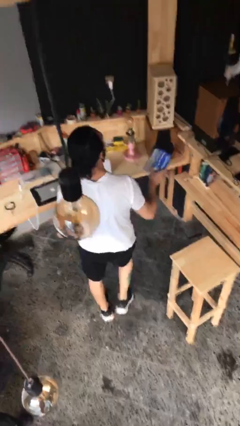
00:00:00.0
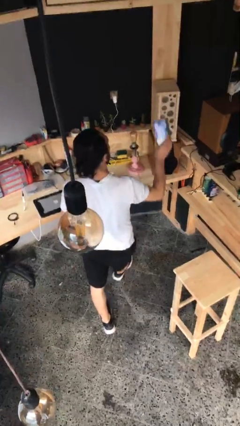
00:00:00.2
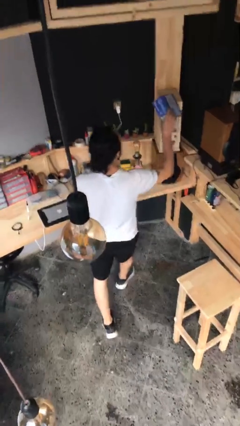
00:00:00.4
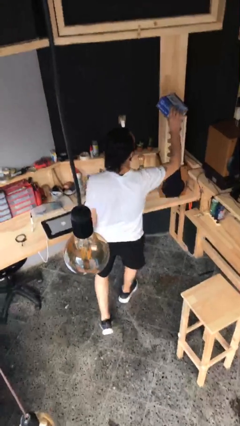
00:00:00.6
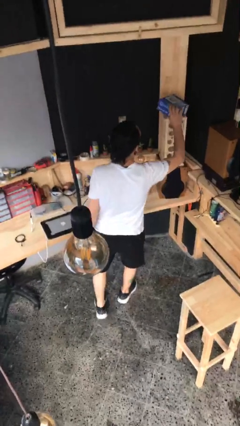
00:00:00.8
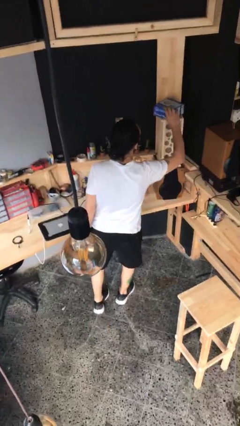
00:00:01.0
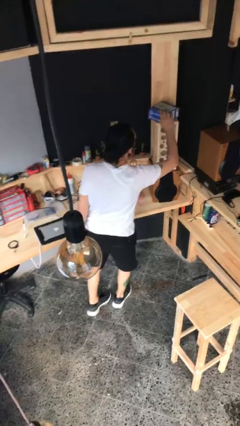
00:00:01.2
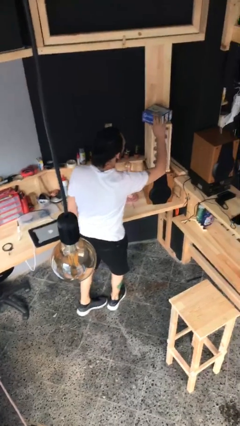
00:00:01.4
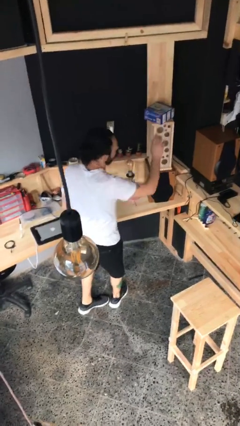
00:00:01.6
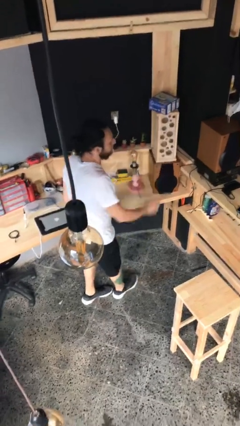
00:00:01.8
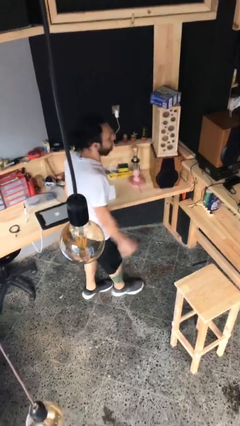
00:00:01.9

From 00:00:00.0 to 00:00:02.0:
person puts down object on shelf

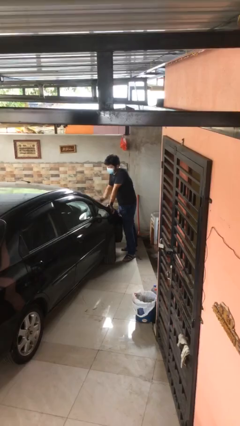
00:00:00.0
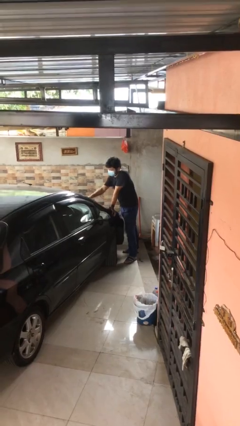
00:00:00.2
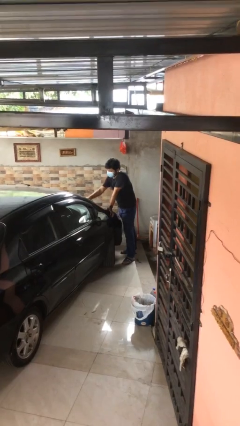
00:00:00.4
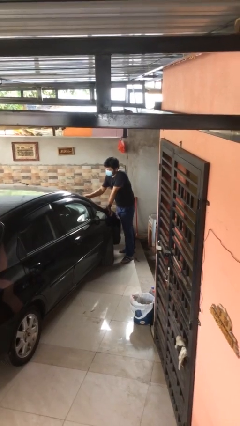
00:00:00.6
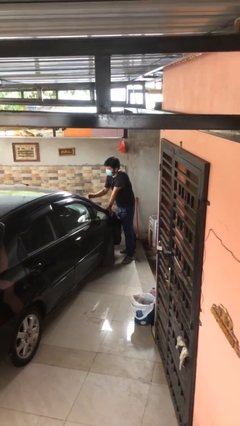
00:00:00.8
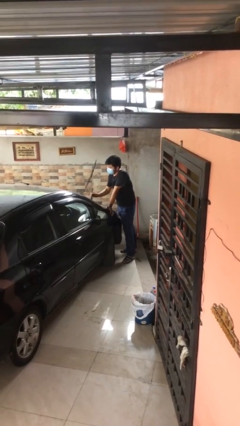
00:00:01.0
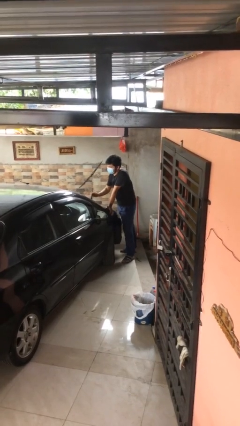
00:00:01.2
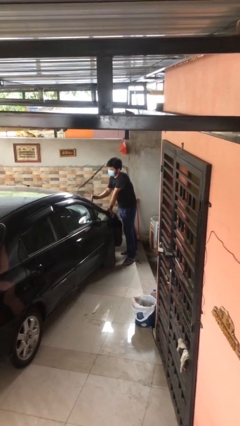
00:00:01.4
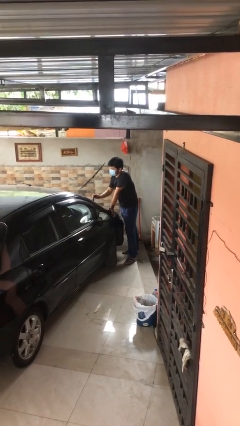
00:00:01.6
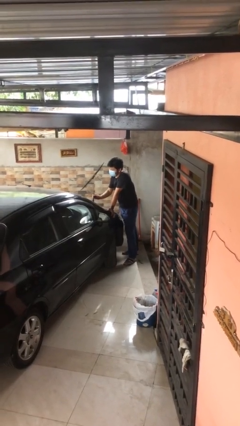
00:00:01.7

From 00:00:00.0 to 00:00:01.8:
person flips up car wipers

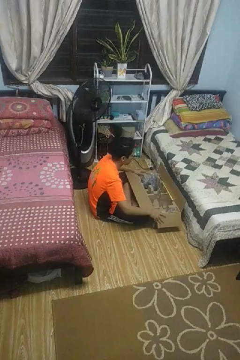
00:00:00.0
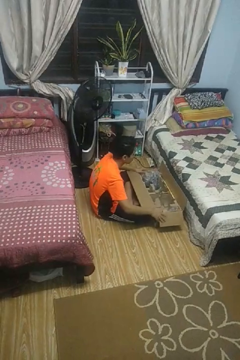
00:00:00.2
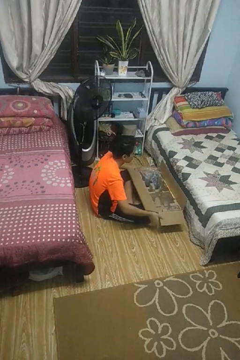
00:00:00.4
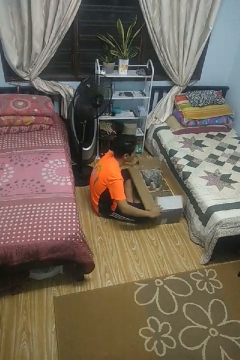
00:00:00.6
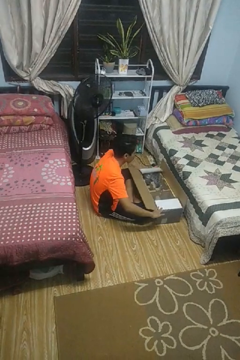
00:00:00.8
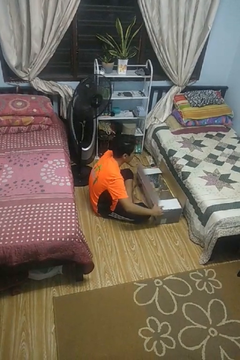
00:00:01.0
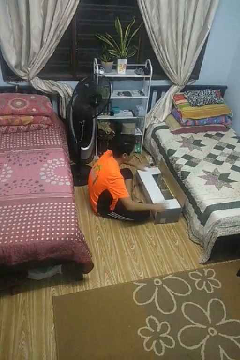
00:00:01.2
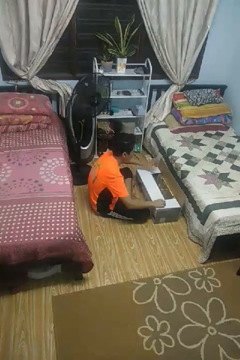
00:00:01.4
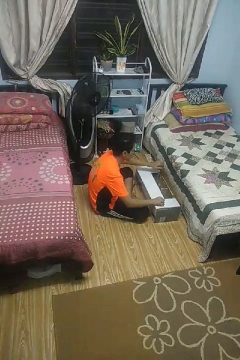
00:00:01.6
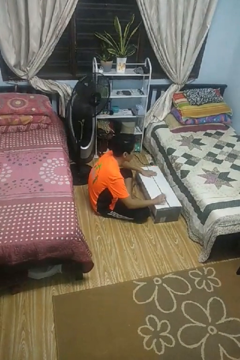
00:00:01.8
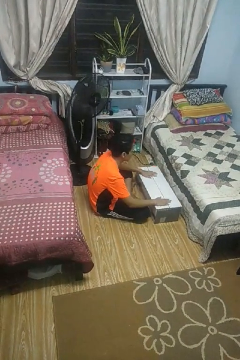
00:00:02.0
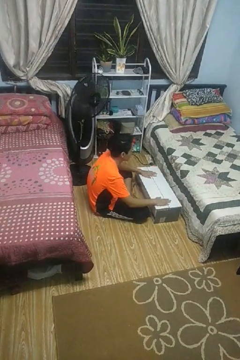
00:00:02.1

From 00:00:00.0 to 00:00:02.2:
person closes box

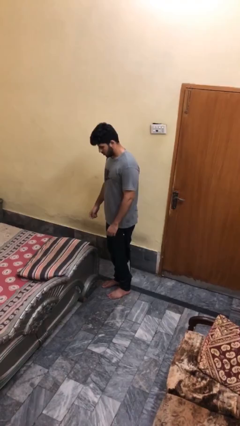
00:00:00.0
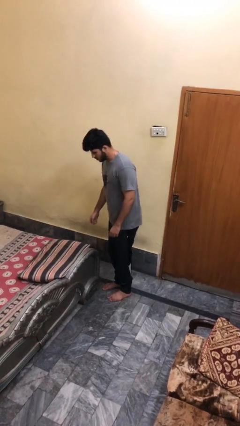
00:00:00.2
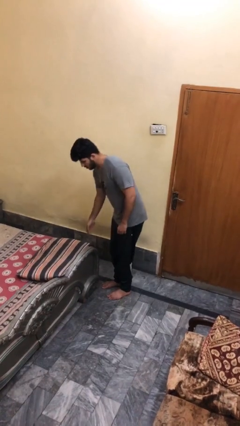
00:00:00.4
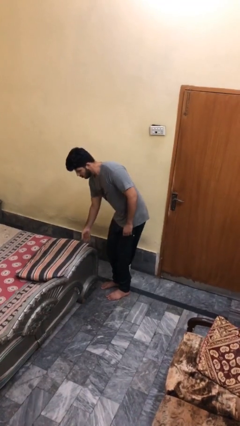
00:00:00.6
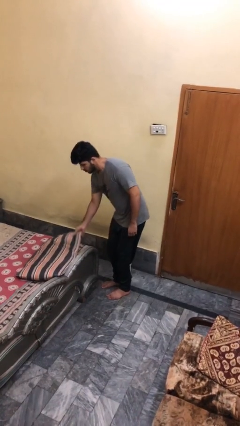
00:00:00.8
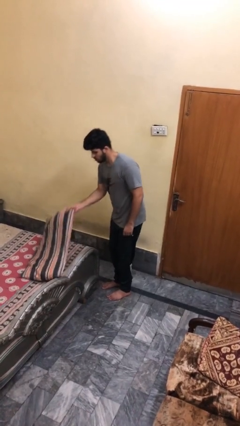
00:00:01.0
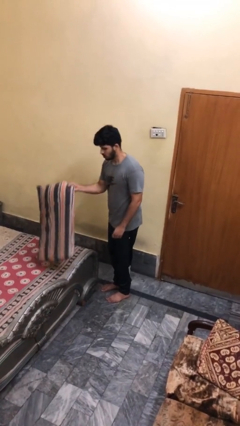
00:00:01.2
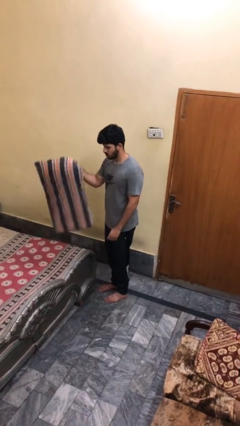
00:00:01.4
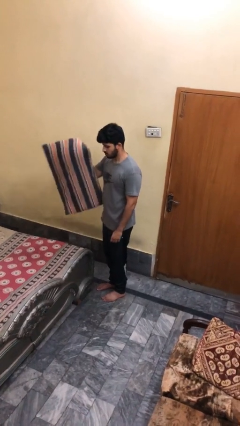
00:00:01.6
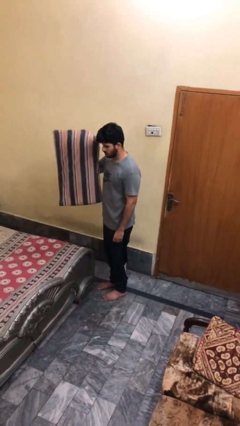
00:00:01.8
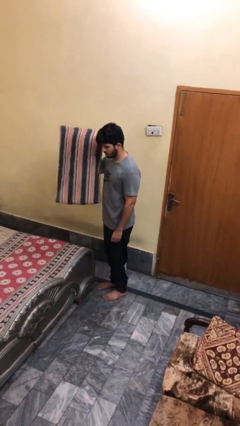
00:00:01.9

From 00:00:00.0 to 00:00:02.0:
person picks up object from bed

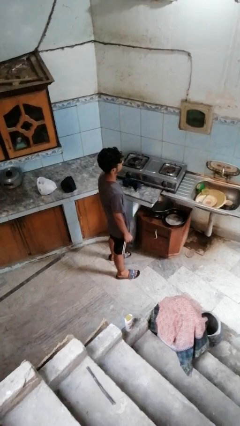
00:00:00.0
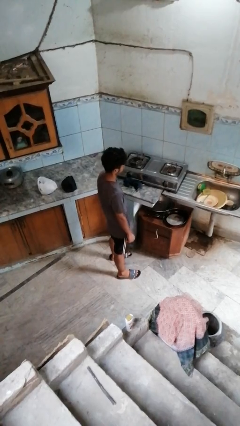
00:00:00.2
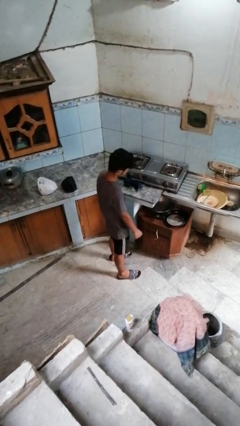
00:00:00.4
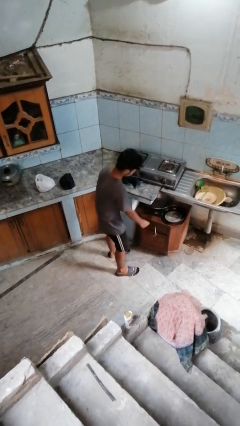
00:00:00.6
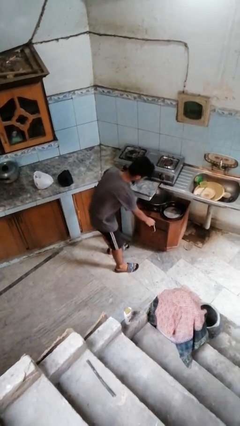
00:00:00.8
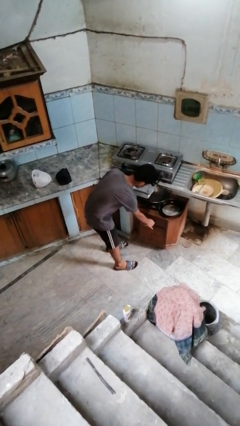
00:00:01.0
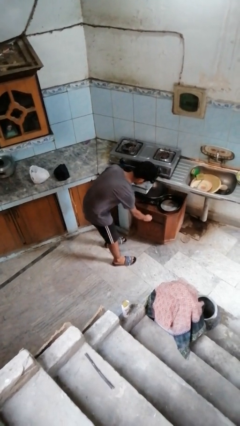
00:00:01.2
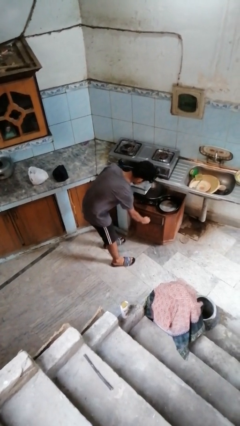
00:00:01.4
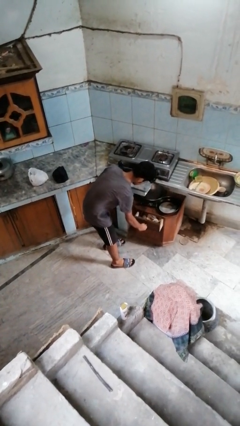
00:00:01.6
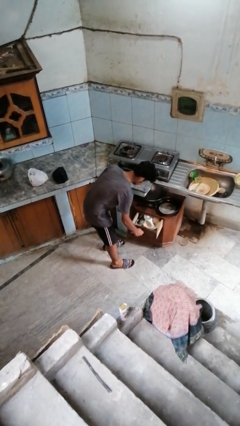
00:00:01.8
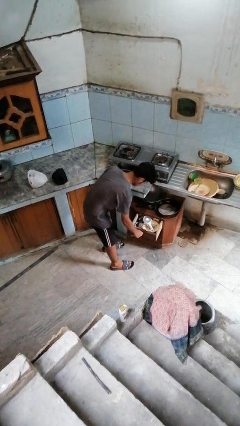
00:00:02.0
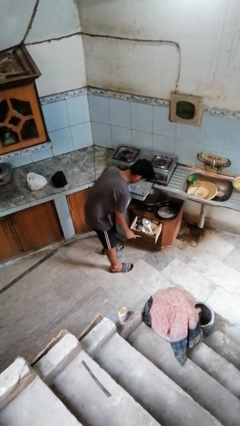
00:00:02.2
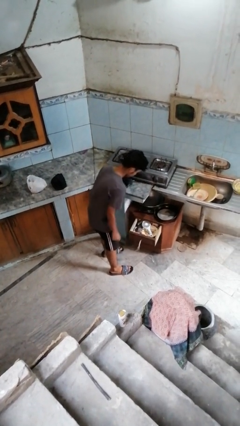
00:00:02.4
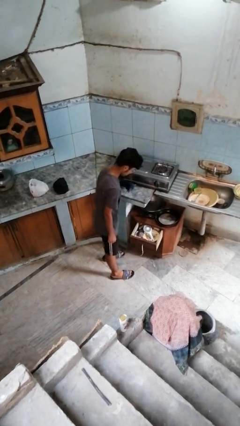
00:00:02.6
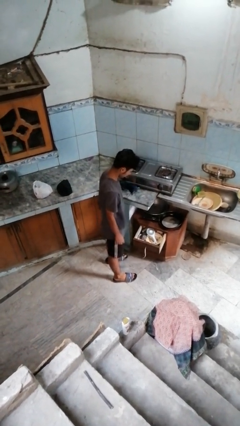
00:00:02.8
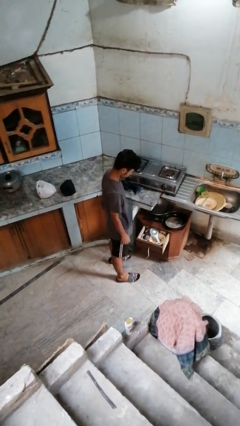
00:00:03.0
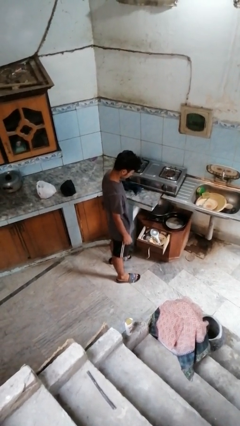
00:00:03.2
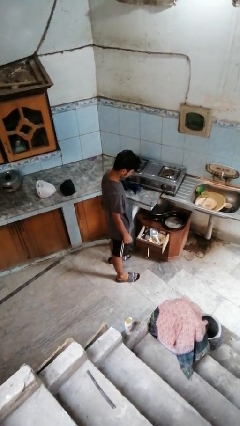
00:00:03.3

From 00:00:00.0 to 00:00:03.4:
person opens kitchen drawer

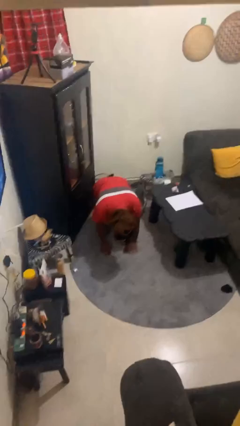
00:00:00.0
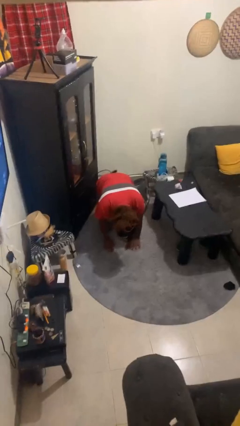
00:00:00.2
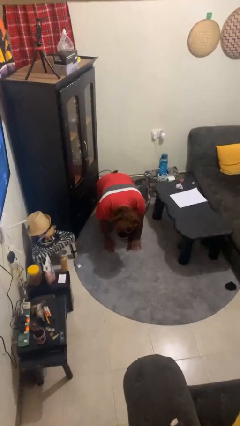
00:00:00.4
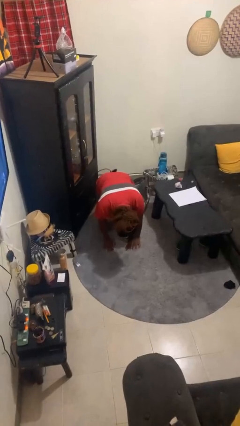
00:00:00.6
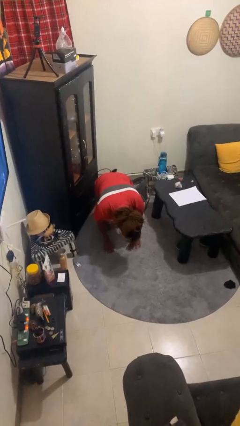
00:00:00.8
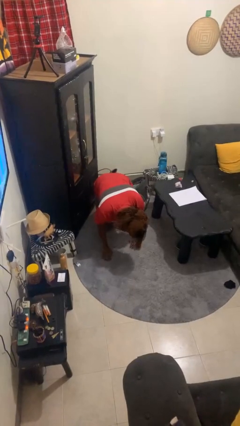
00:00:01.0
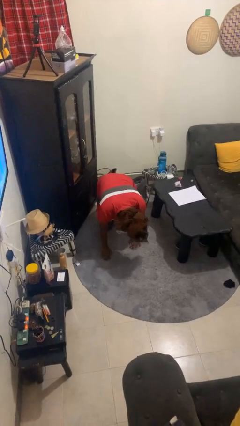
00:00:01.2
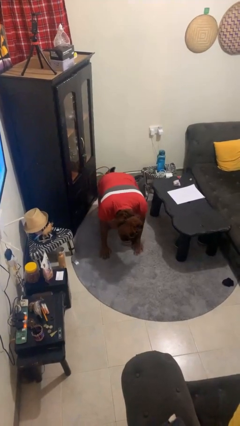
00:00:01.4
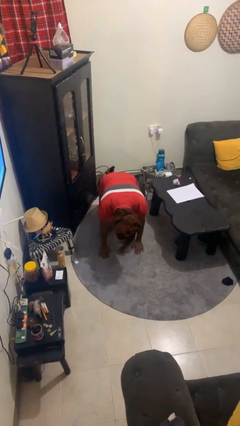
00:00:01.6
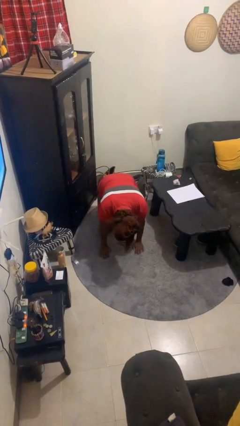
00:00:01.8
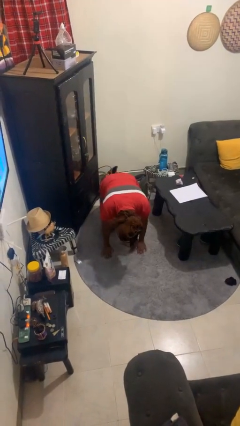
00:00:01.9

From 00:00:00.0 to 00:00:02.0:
person crawls

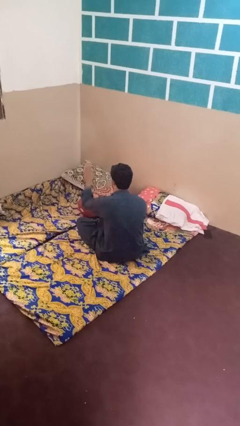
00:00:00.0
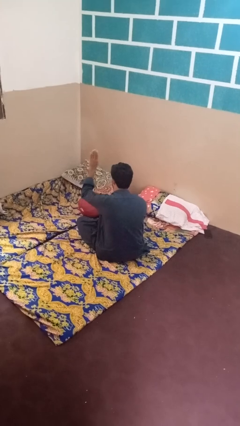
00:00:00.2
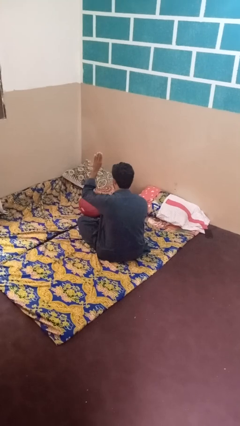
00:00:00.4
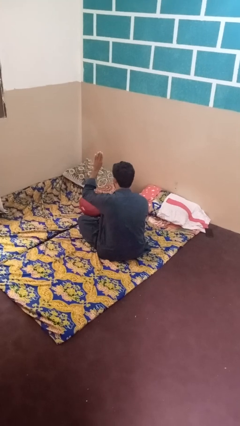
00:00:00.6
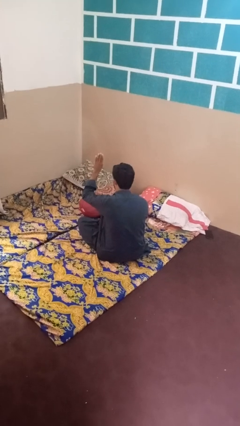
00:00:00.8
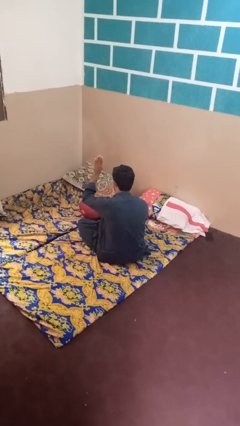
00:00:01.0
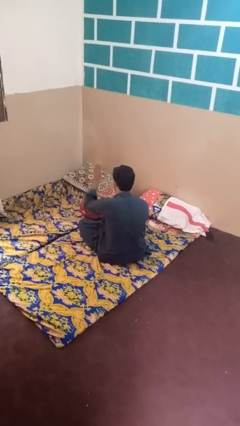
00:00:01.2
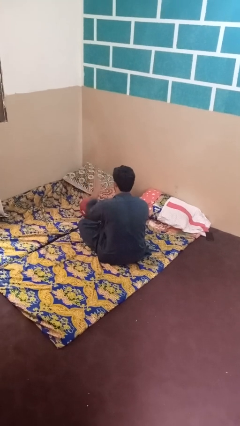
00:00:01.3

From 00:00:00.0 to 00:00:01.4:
person gestures number four

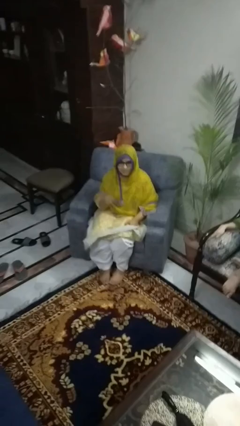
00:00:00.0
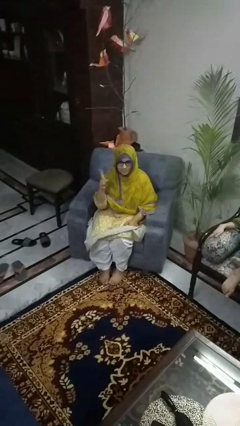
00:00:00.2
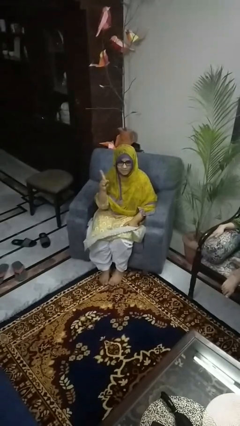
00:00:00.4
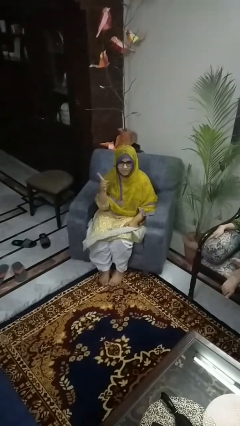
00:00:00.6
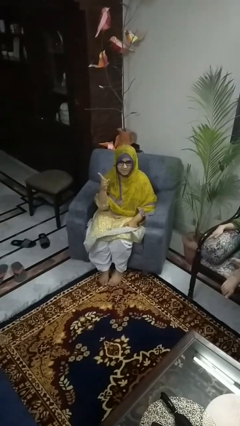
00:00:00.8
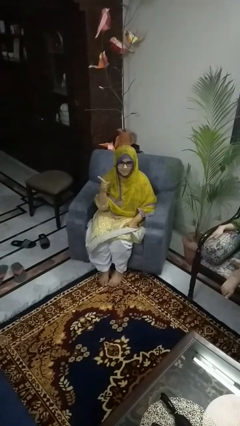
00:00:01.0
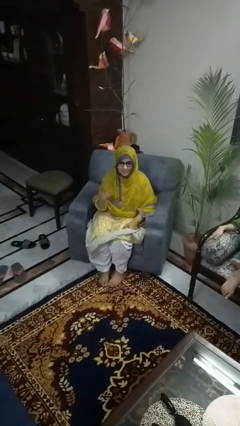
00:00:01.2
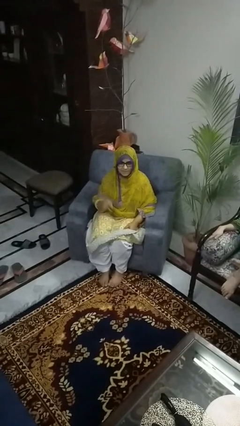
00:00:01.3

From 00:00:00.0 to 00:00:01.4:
person gestures number one

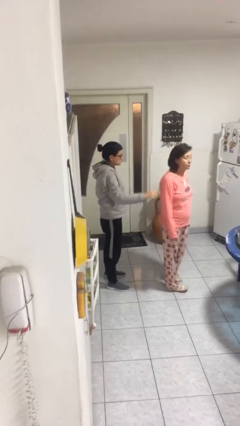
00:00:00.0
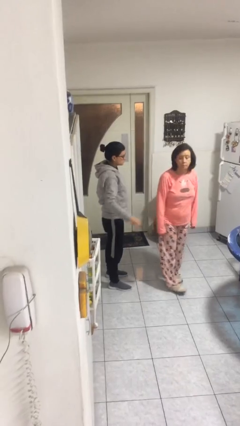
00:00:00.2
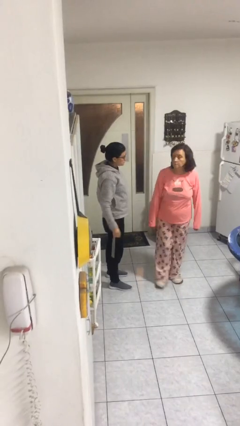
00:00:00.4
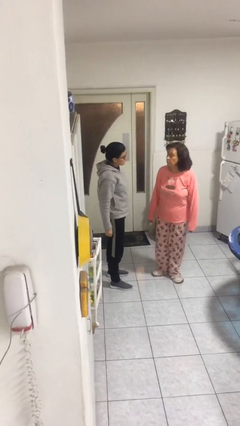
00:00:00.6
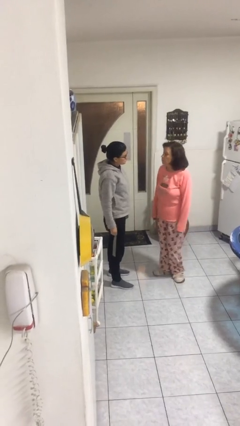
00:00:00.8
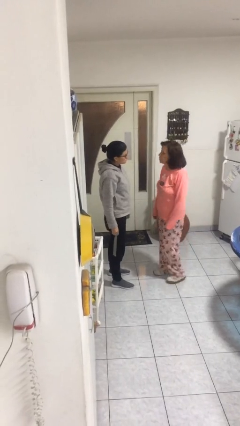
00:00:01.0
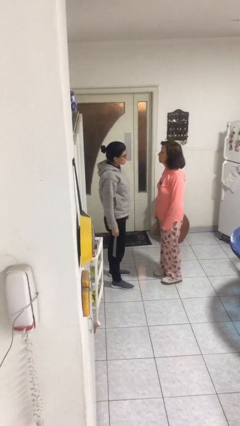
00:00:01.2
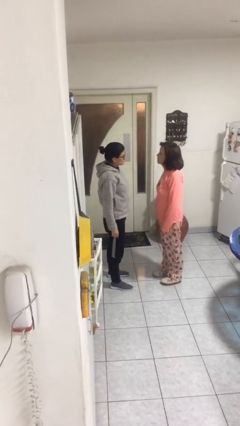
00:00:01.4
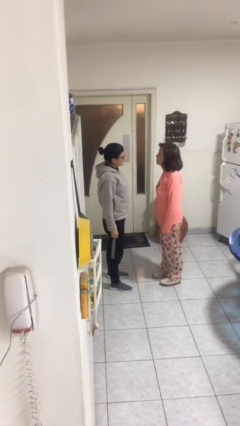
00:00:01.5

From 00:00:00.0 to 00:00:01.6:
person spins person around
